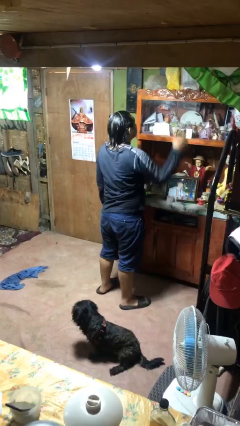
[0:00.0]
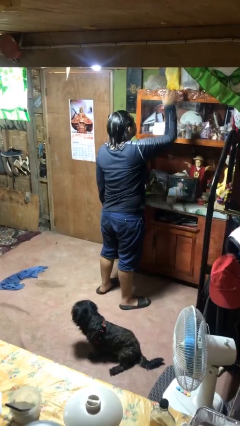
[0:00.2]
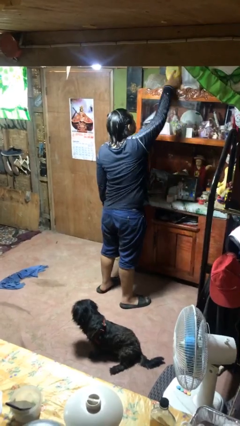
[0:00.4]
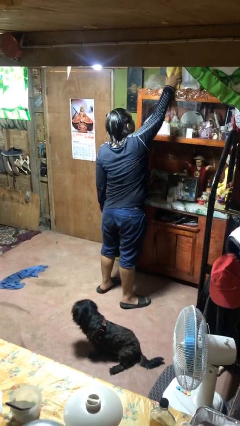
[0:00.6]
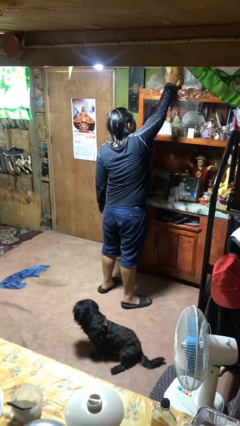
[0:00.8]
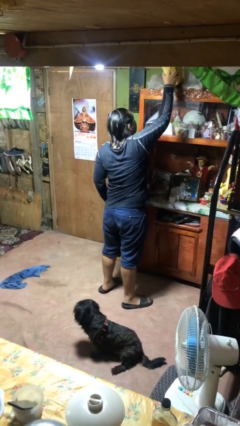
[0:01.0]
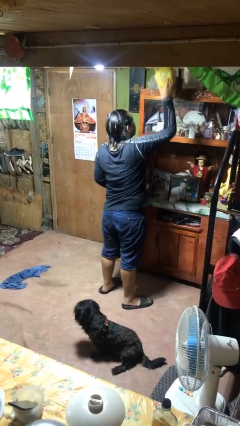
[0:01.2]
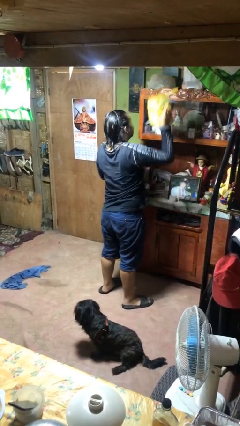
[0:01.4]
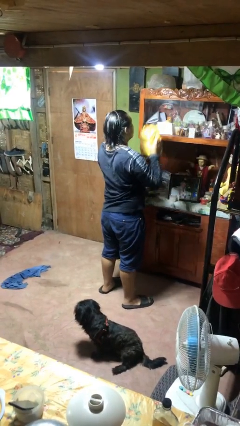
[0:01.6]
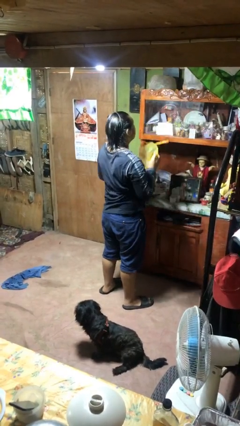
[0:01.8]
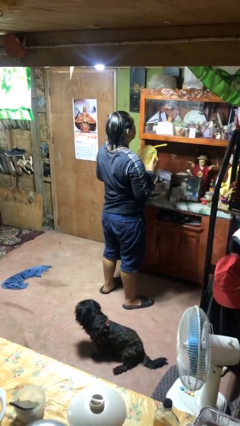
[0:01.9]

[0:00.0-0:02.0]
person picks up object from shelf

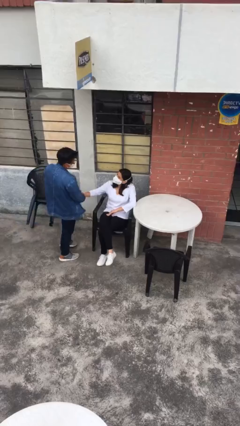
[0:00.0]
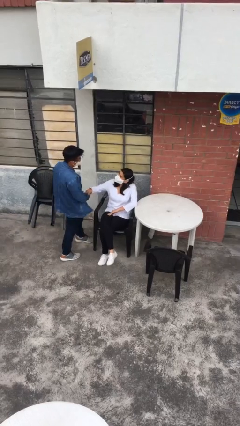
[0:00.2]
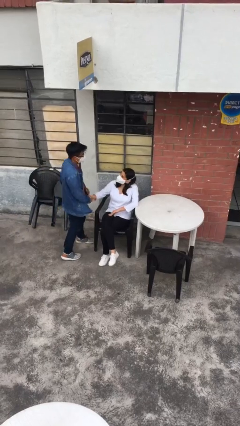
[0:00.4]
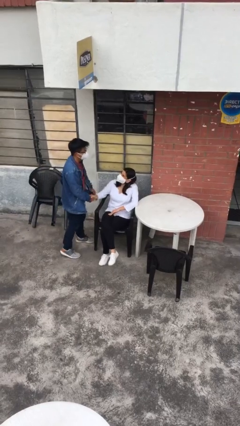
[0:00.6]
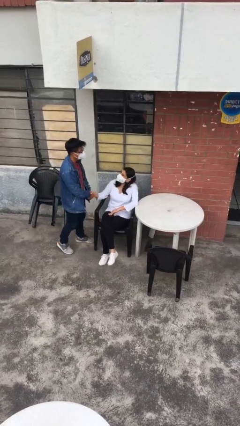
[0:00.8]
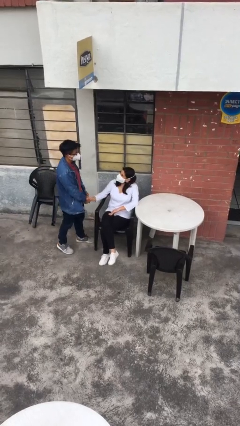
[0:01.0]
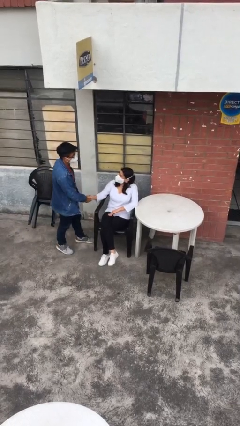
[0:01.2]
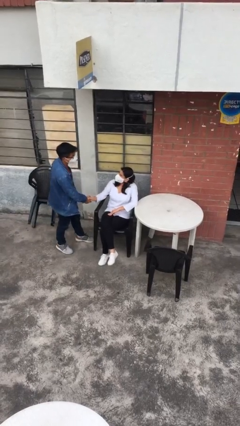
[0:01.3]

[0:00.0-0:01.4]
person shakes hand

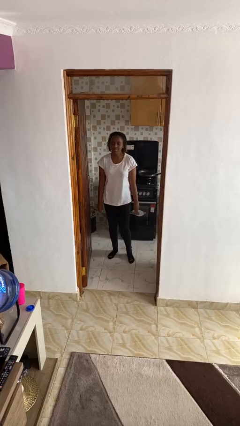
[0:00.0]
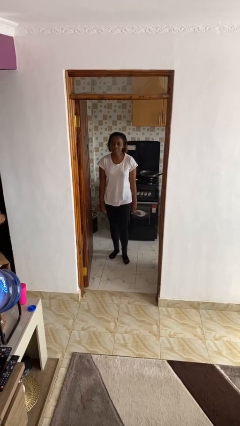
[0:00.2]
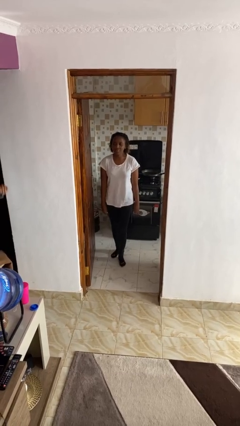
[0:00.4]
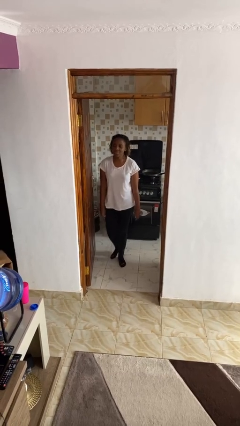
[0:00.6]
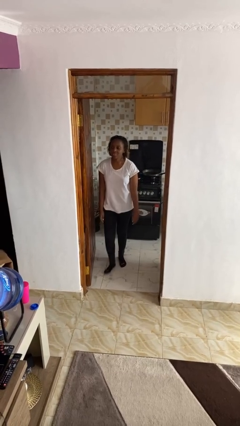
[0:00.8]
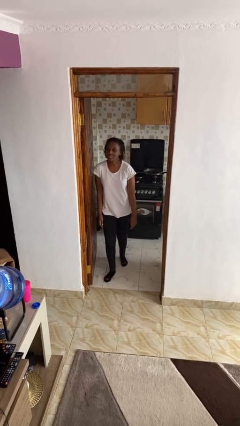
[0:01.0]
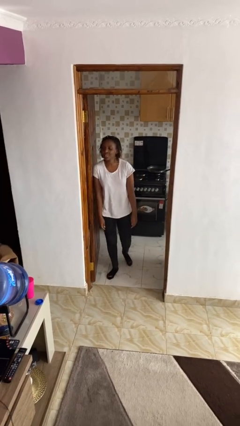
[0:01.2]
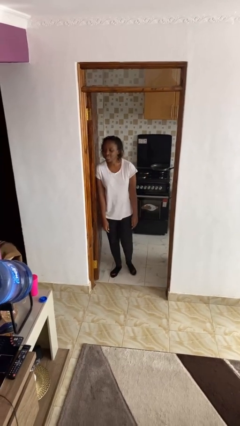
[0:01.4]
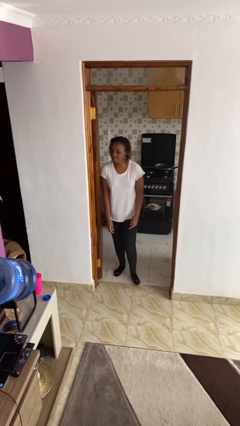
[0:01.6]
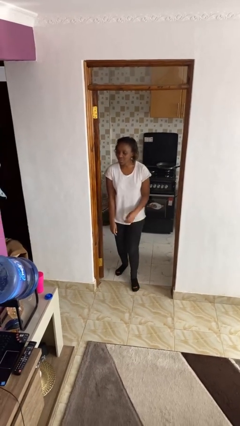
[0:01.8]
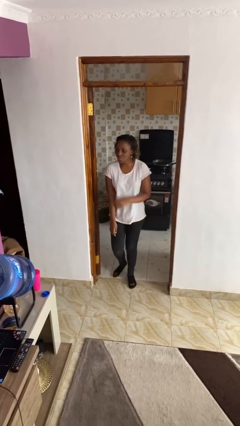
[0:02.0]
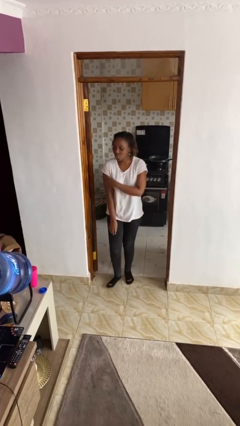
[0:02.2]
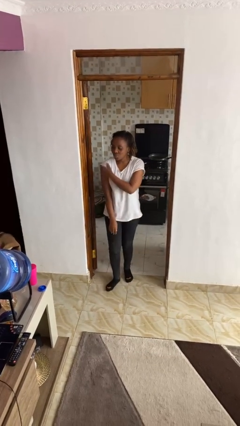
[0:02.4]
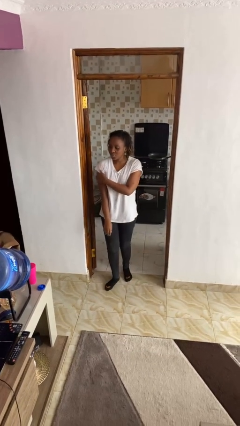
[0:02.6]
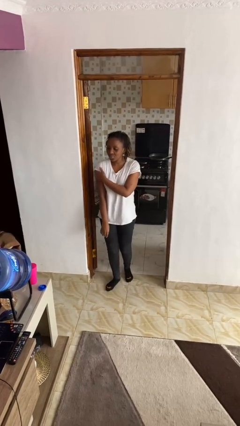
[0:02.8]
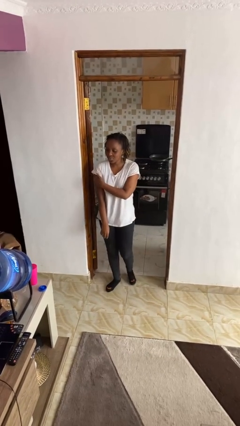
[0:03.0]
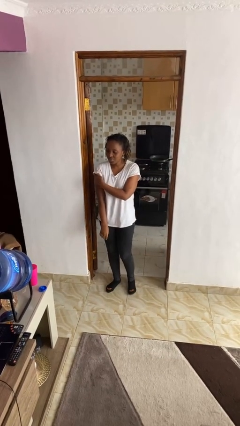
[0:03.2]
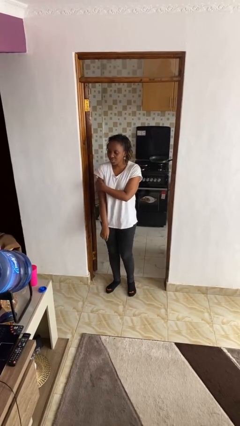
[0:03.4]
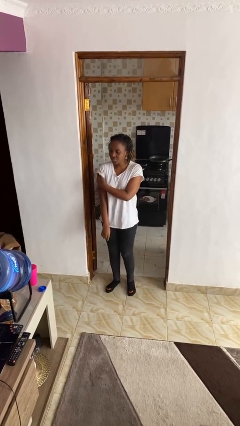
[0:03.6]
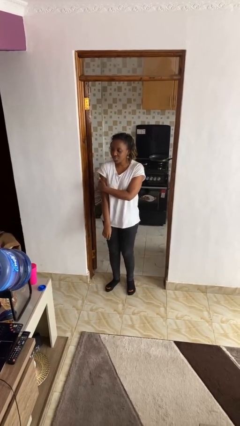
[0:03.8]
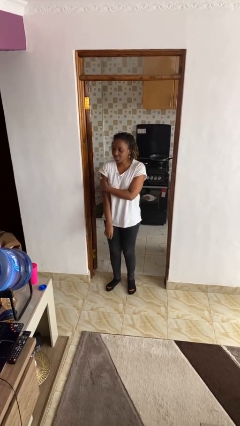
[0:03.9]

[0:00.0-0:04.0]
person bumps into wall

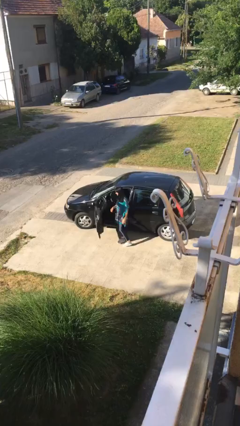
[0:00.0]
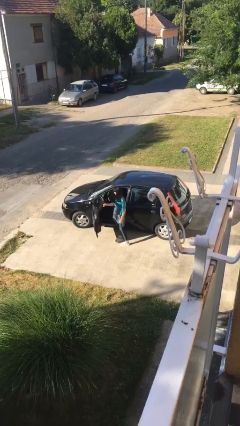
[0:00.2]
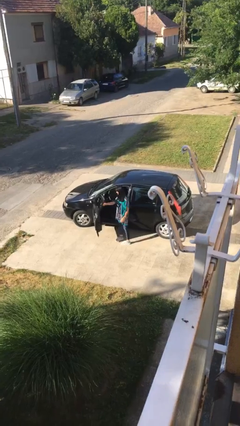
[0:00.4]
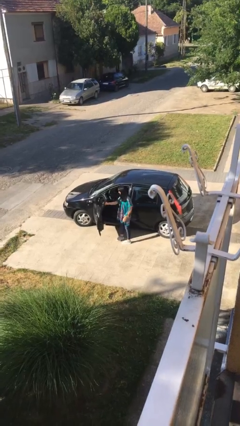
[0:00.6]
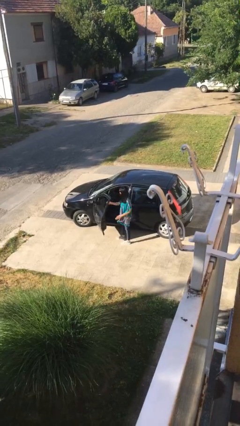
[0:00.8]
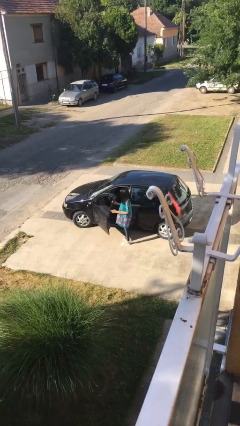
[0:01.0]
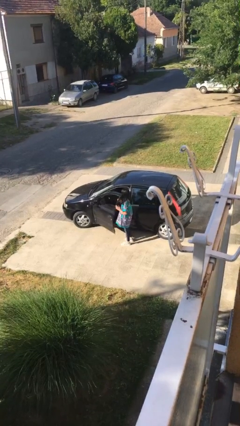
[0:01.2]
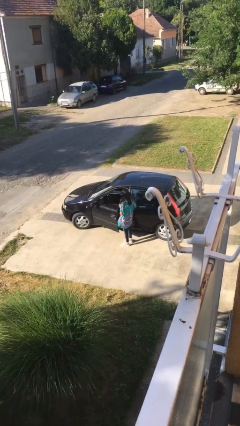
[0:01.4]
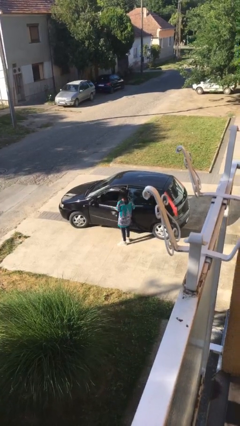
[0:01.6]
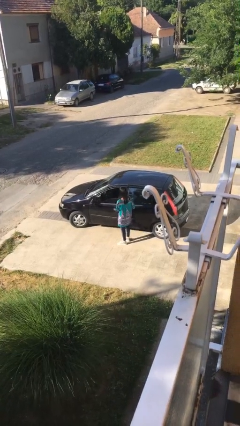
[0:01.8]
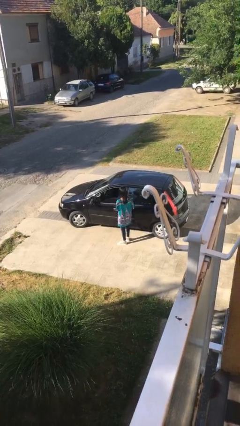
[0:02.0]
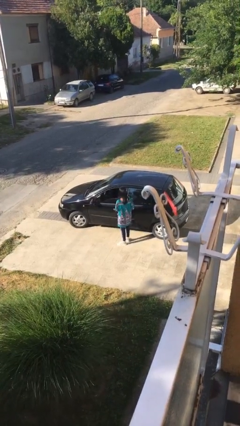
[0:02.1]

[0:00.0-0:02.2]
person closes car door

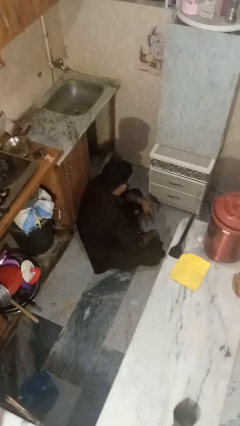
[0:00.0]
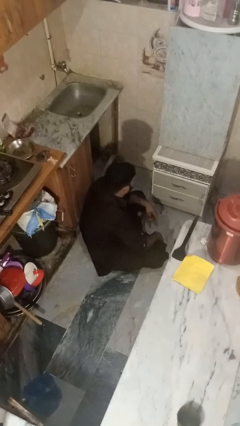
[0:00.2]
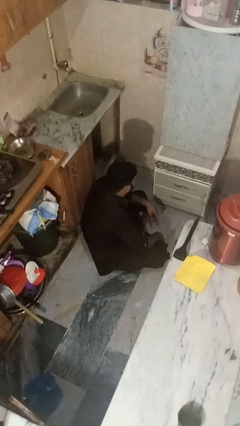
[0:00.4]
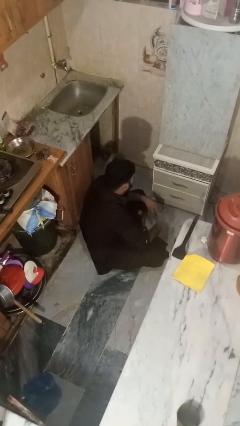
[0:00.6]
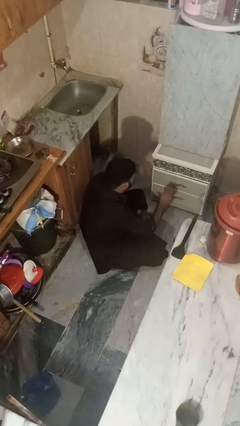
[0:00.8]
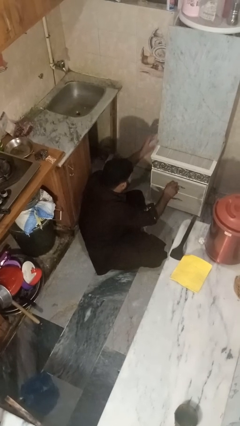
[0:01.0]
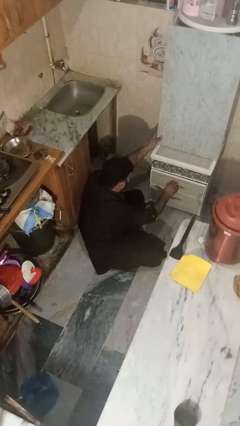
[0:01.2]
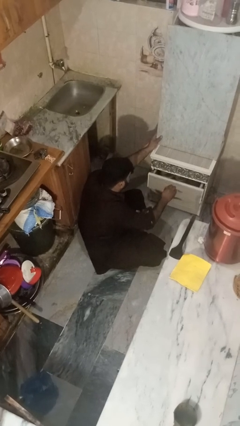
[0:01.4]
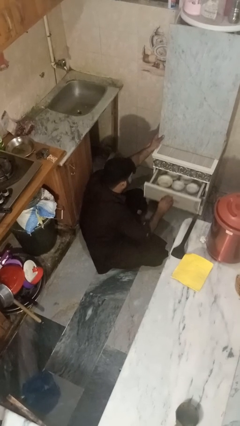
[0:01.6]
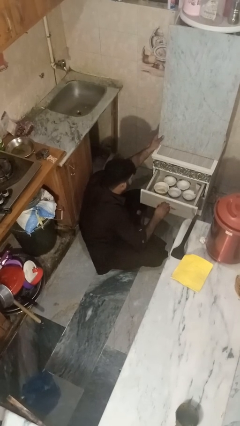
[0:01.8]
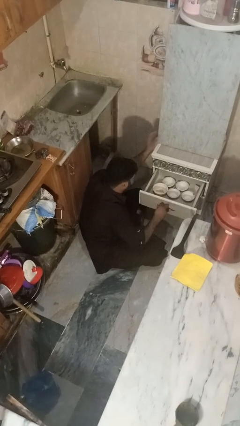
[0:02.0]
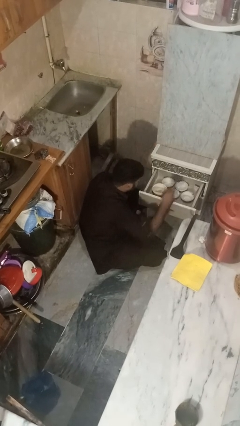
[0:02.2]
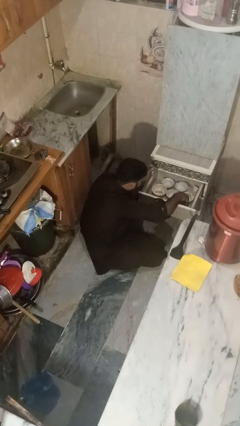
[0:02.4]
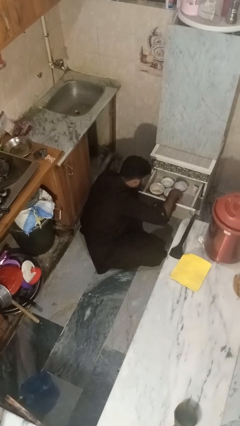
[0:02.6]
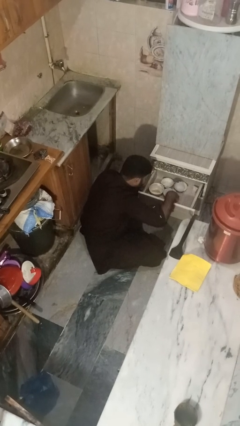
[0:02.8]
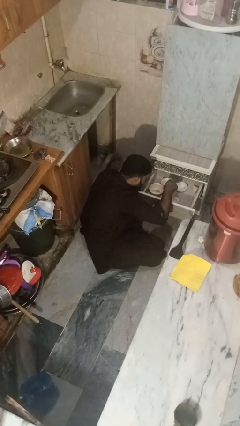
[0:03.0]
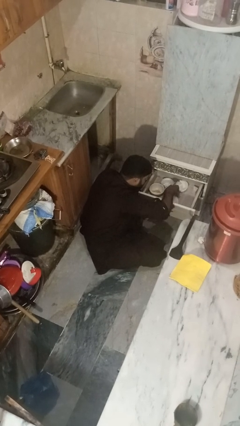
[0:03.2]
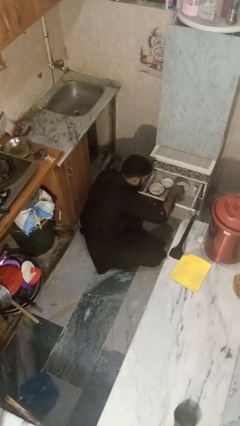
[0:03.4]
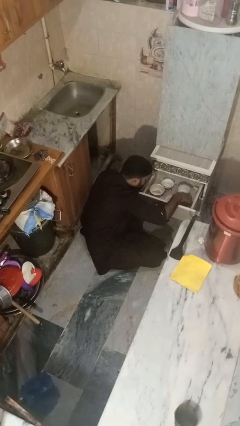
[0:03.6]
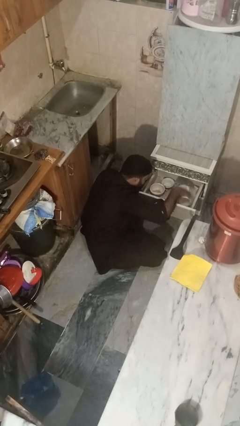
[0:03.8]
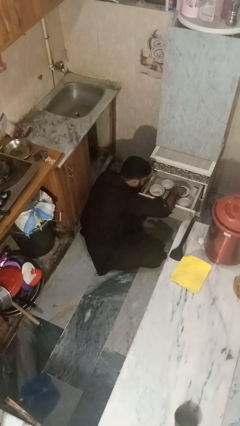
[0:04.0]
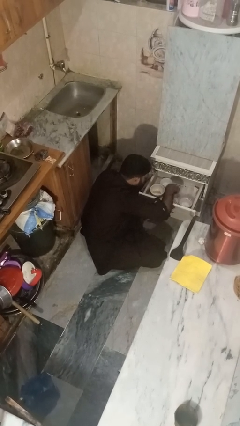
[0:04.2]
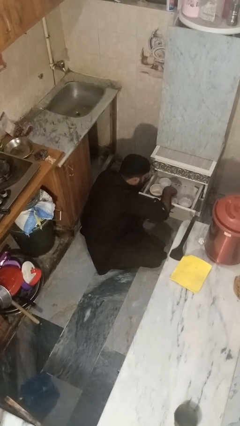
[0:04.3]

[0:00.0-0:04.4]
person searches in kitchen drawer

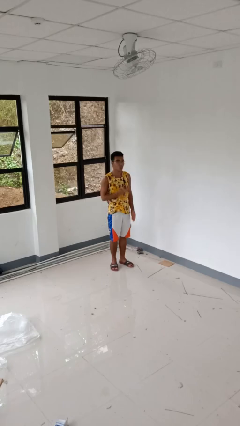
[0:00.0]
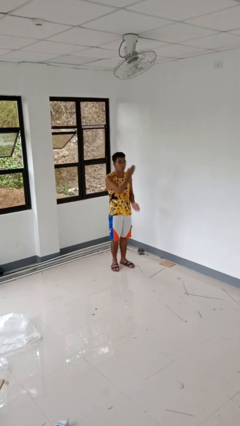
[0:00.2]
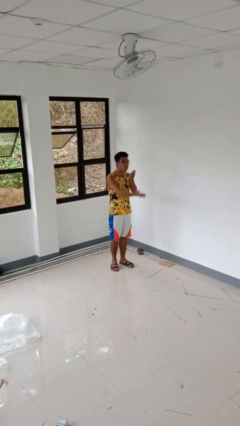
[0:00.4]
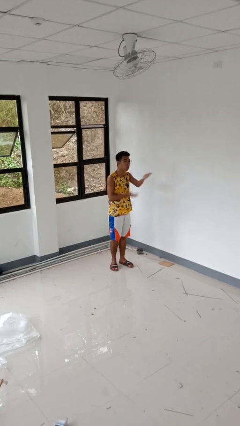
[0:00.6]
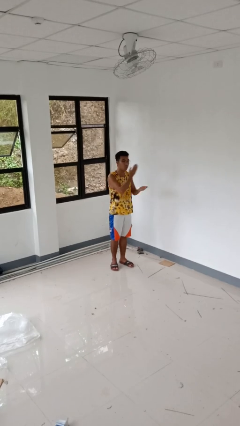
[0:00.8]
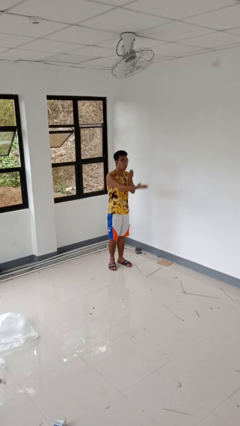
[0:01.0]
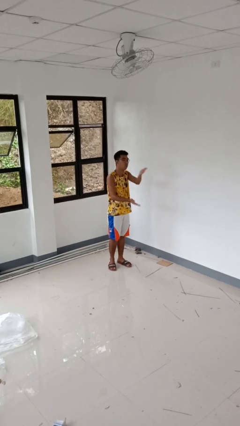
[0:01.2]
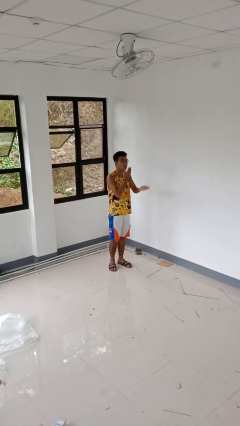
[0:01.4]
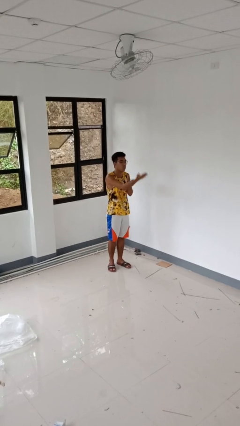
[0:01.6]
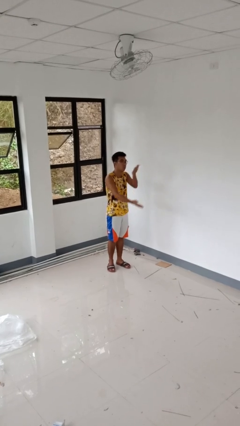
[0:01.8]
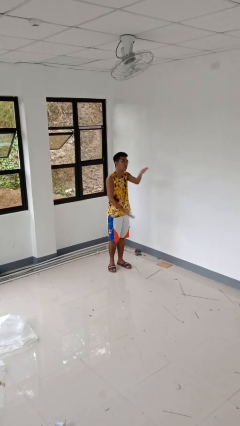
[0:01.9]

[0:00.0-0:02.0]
person gestures blow kiss

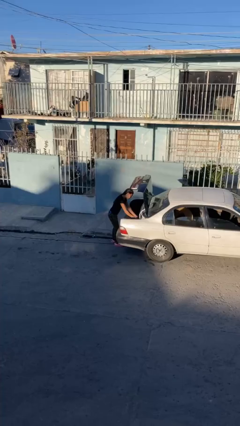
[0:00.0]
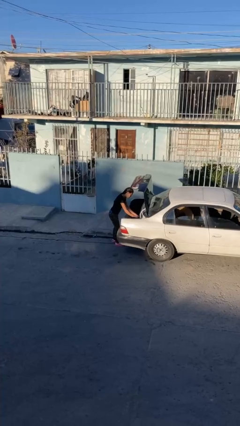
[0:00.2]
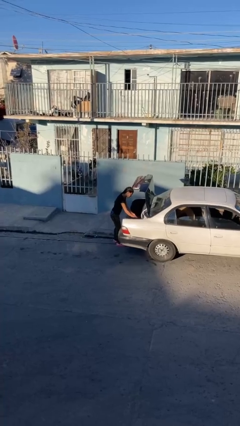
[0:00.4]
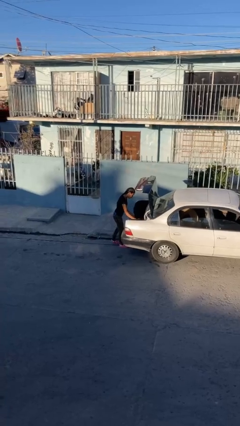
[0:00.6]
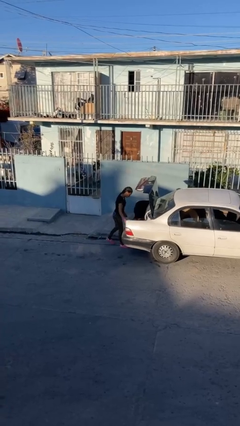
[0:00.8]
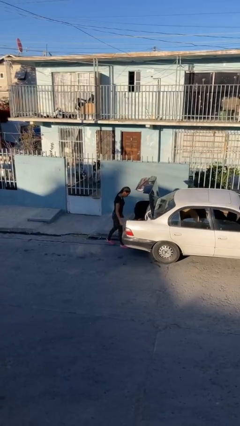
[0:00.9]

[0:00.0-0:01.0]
person loads car

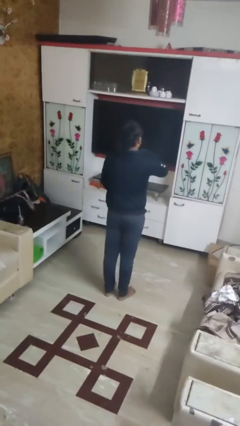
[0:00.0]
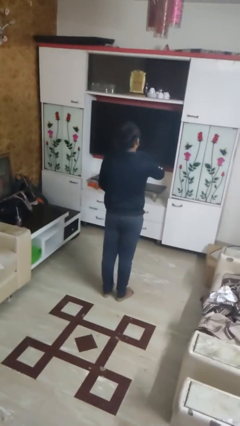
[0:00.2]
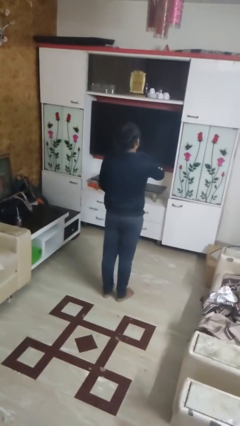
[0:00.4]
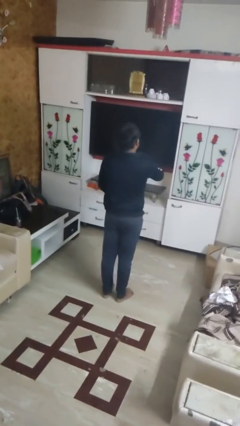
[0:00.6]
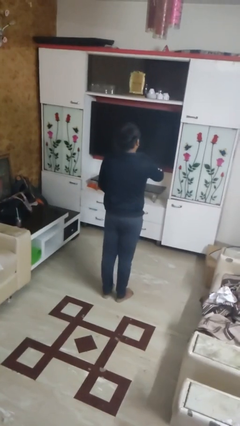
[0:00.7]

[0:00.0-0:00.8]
person zips up jacket
